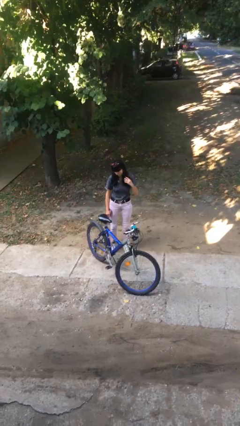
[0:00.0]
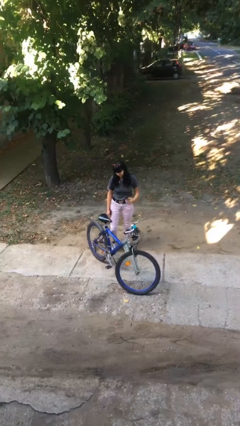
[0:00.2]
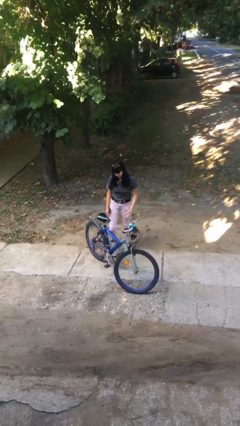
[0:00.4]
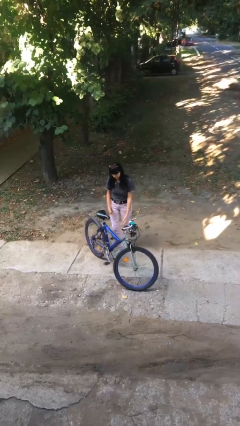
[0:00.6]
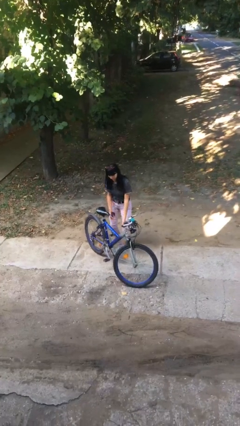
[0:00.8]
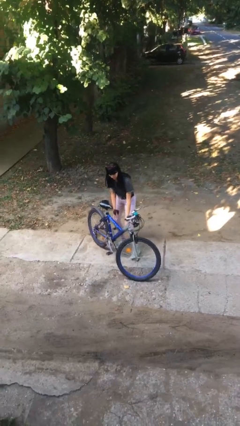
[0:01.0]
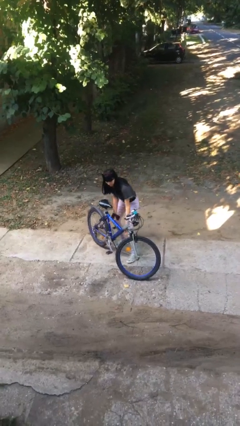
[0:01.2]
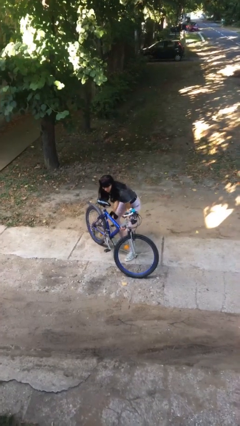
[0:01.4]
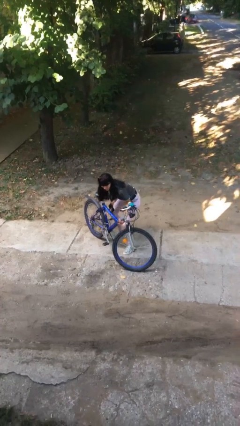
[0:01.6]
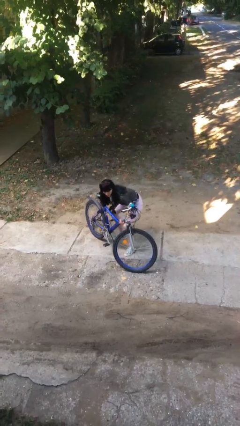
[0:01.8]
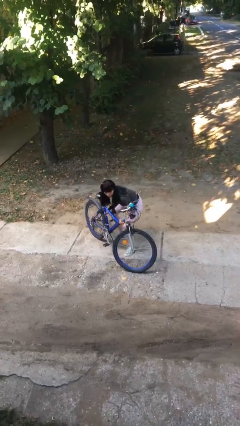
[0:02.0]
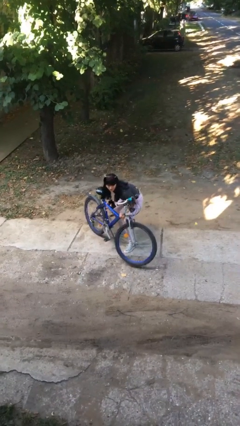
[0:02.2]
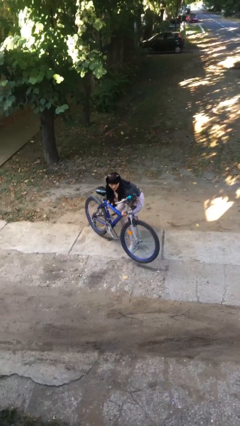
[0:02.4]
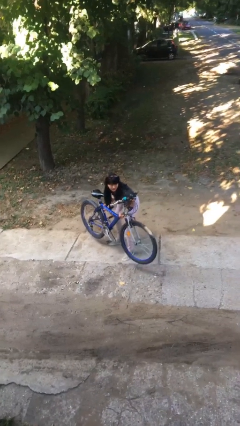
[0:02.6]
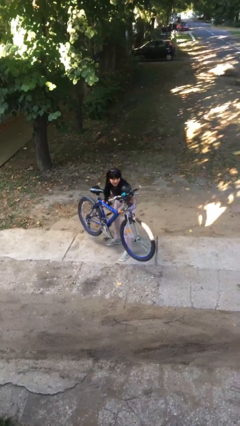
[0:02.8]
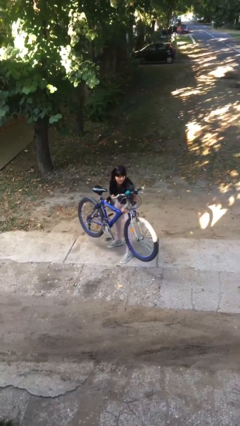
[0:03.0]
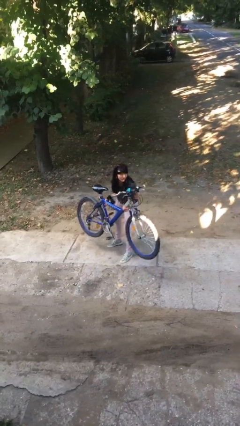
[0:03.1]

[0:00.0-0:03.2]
person picks up object from floor

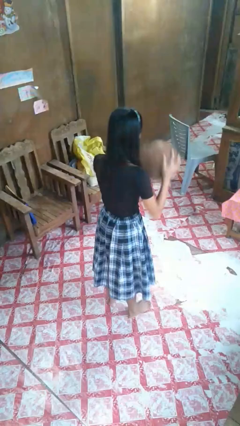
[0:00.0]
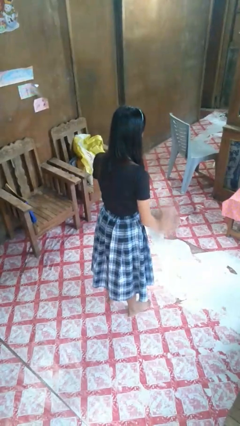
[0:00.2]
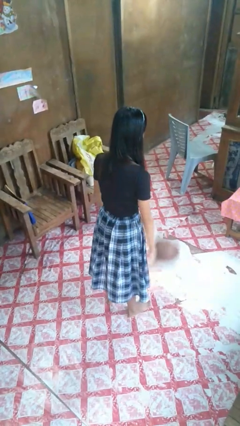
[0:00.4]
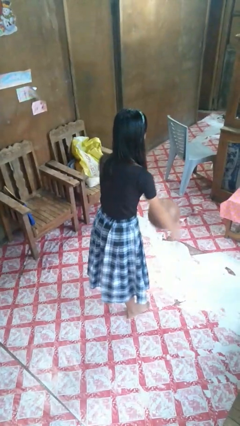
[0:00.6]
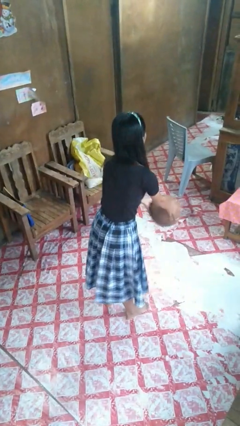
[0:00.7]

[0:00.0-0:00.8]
person bounces ball on floor

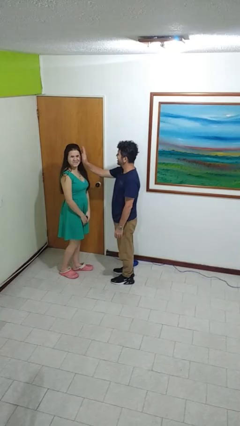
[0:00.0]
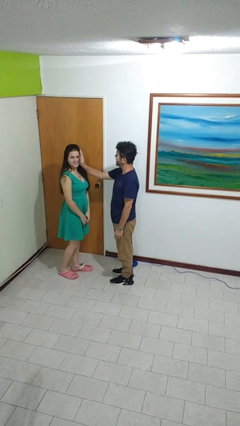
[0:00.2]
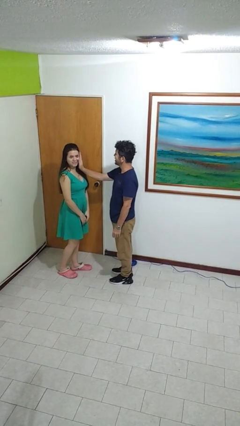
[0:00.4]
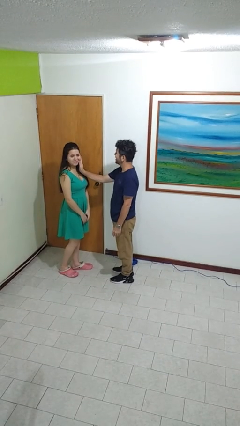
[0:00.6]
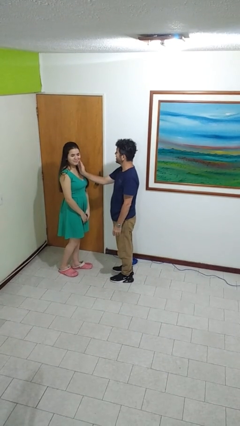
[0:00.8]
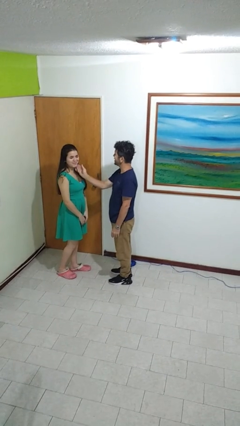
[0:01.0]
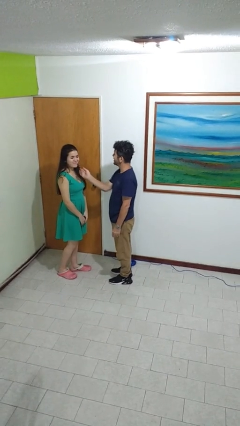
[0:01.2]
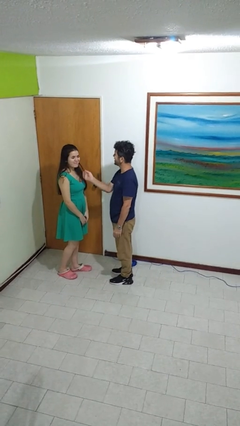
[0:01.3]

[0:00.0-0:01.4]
person touches face of person

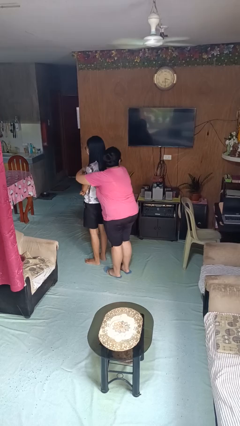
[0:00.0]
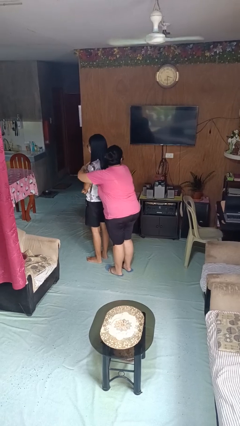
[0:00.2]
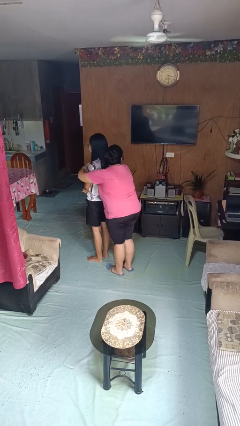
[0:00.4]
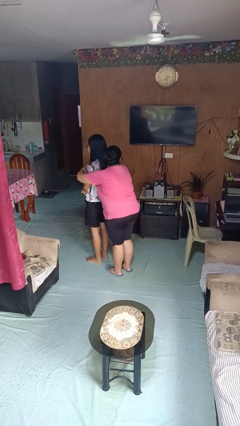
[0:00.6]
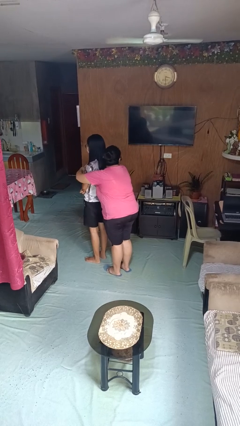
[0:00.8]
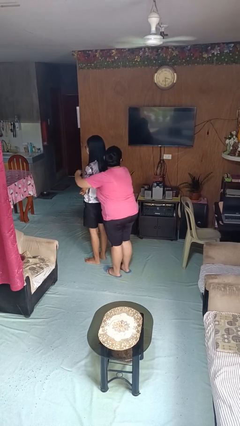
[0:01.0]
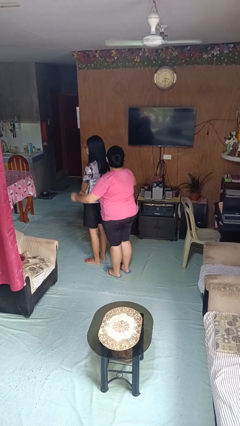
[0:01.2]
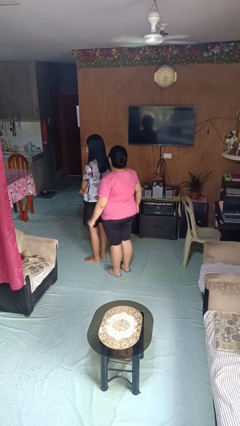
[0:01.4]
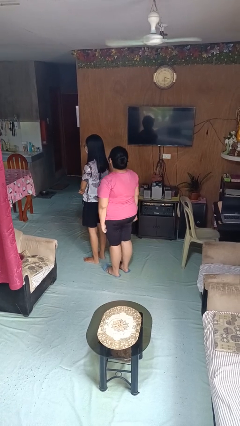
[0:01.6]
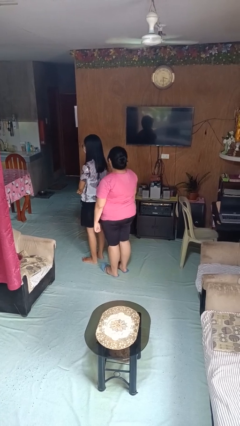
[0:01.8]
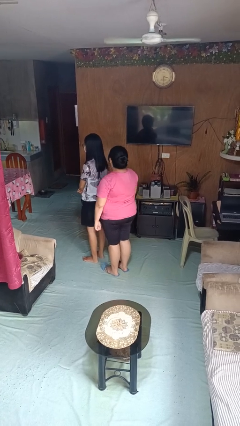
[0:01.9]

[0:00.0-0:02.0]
person hugs person from behind

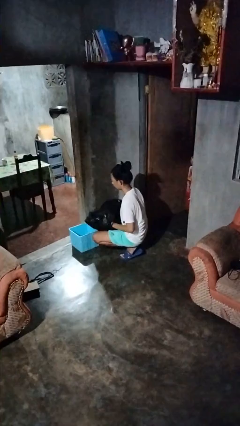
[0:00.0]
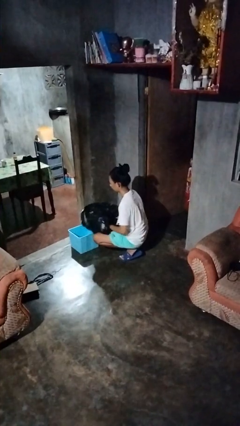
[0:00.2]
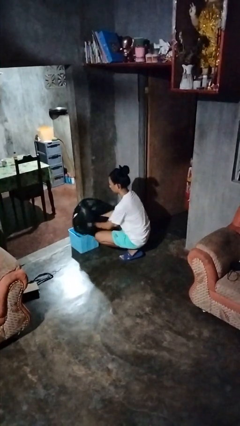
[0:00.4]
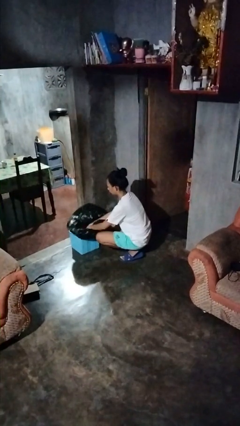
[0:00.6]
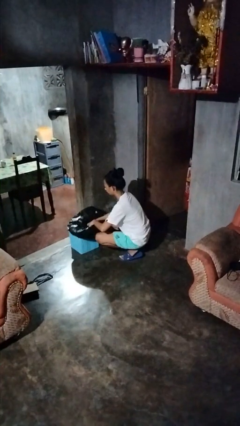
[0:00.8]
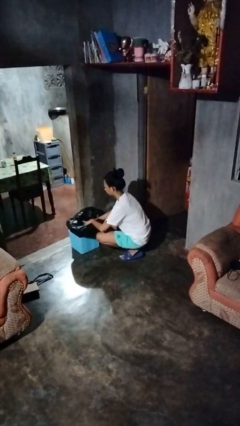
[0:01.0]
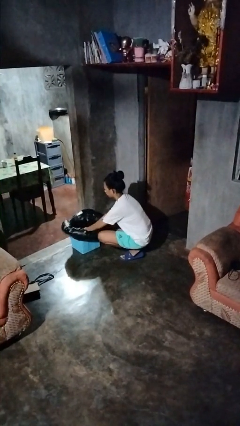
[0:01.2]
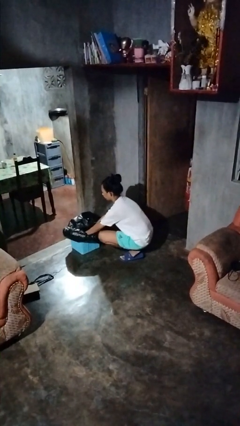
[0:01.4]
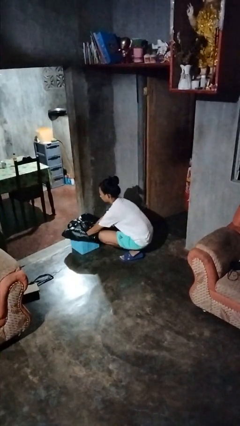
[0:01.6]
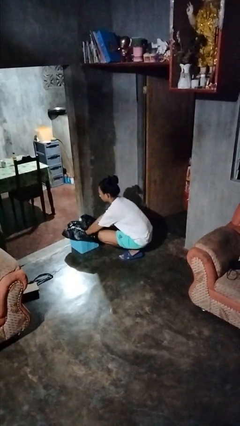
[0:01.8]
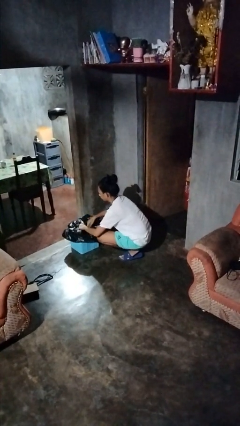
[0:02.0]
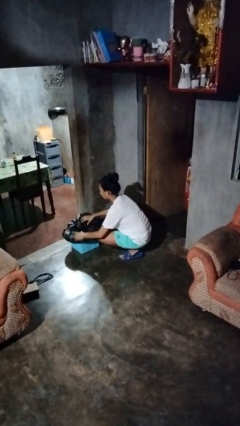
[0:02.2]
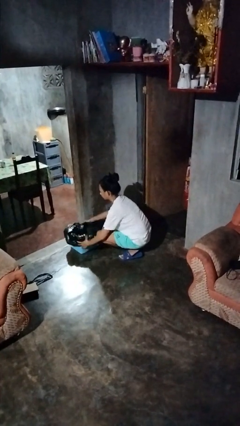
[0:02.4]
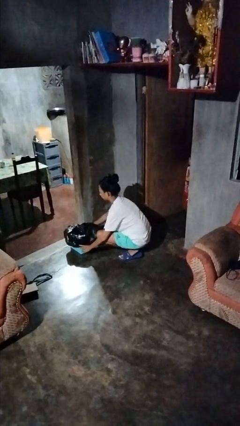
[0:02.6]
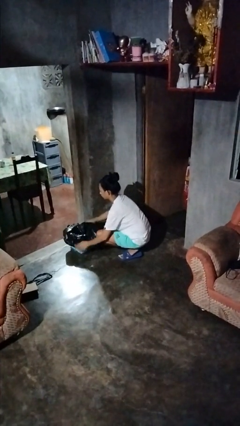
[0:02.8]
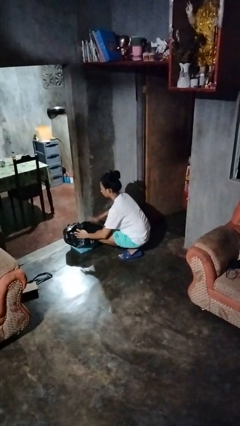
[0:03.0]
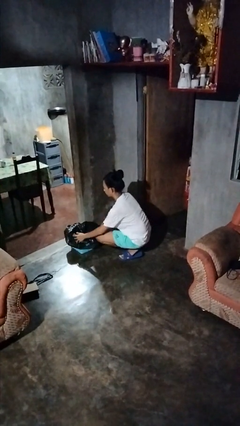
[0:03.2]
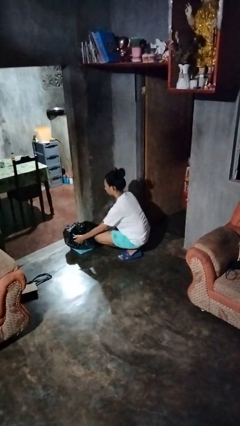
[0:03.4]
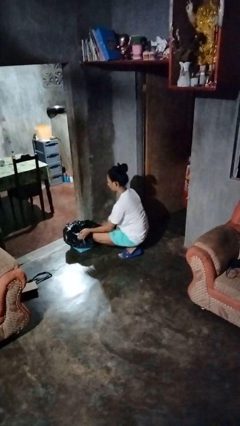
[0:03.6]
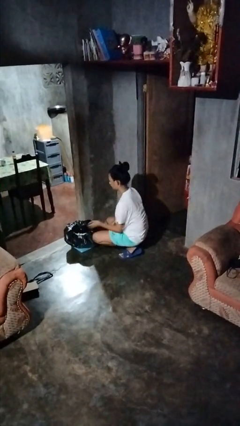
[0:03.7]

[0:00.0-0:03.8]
person inserts trashbag into trashcan

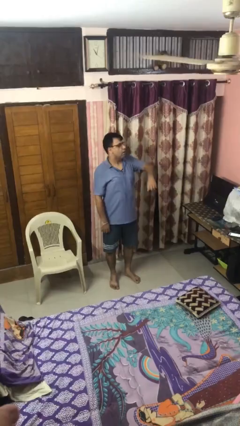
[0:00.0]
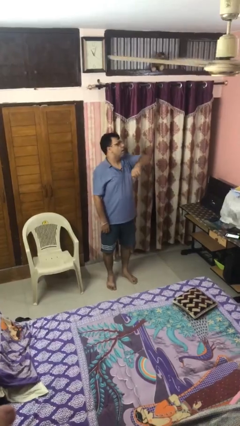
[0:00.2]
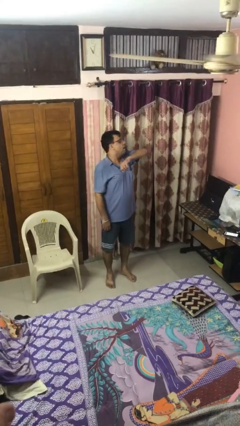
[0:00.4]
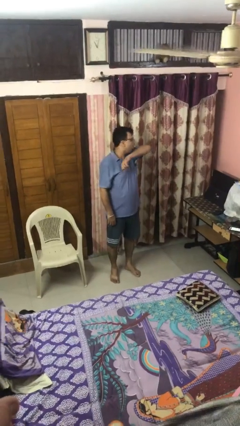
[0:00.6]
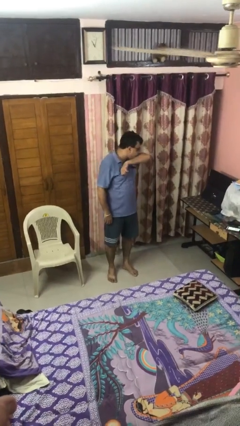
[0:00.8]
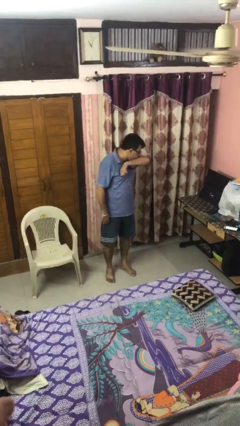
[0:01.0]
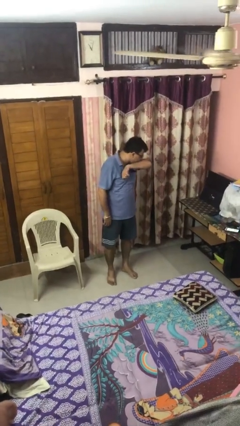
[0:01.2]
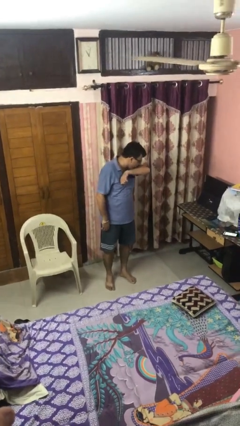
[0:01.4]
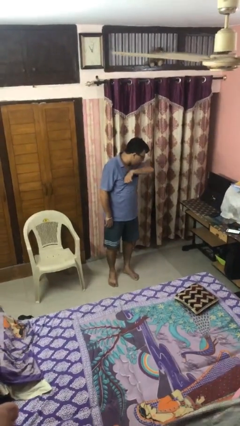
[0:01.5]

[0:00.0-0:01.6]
person sneezes into arm

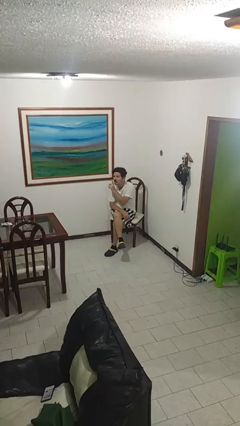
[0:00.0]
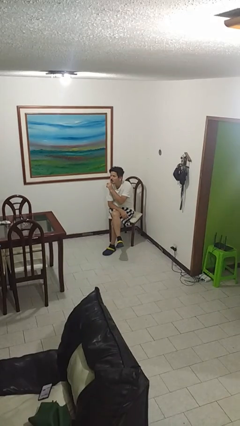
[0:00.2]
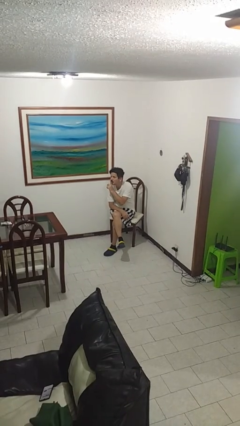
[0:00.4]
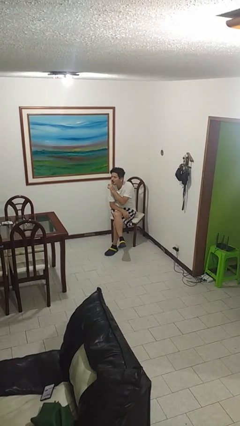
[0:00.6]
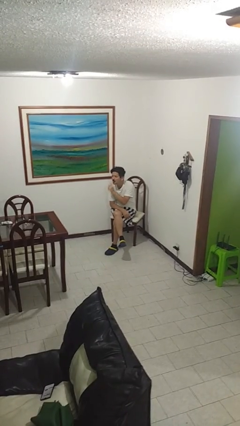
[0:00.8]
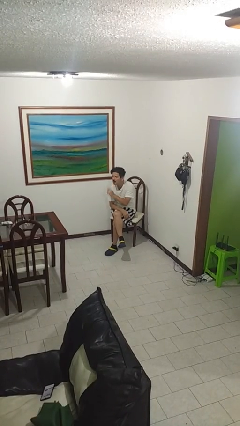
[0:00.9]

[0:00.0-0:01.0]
person gestures be quiet

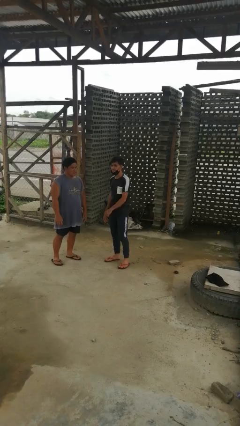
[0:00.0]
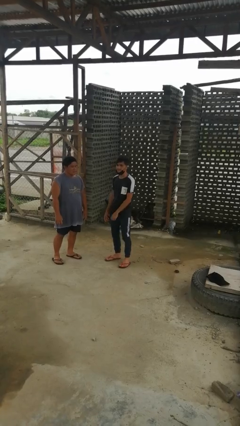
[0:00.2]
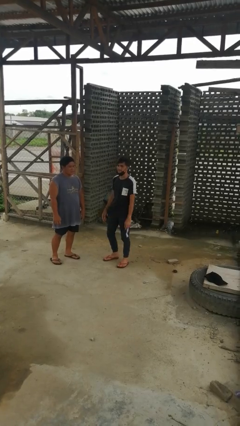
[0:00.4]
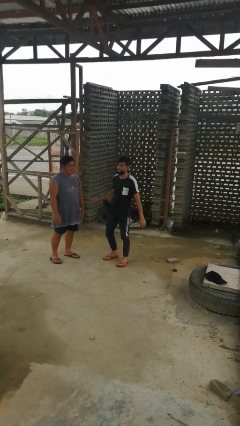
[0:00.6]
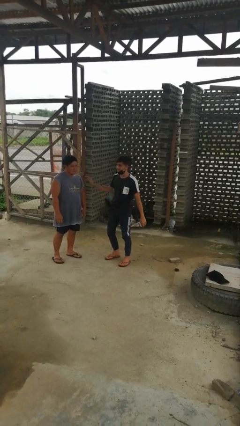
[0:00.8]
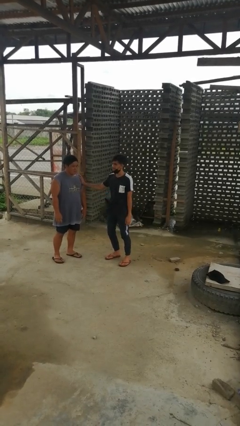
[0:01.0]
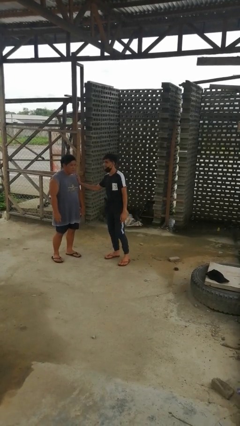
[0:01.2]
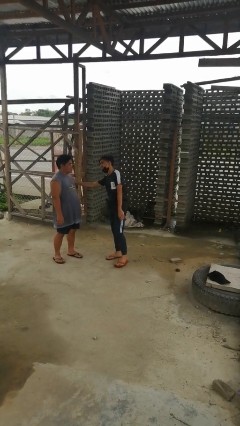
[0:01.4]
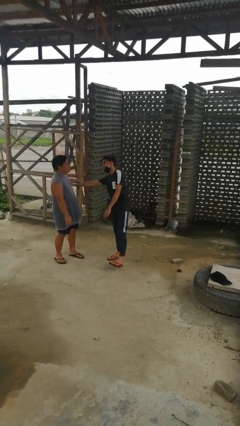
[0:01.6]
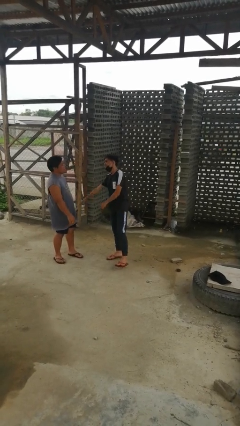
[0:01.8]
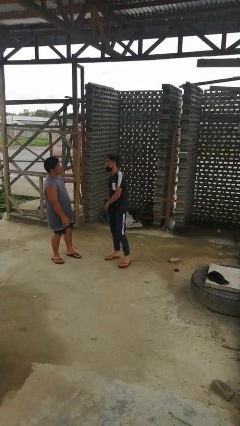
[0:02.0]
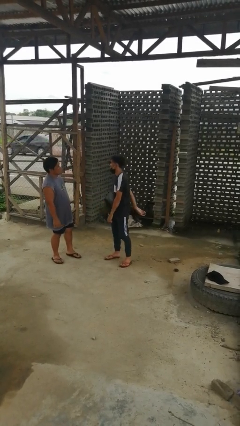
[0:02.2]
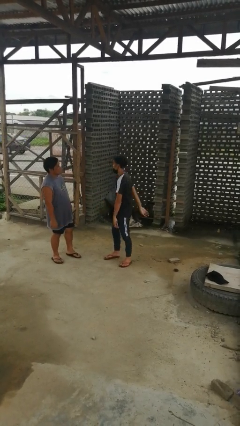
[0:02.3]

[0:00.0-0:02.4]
person shoves person

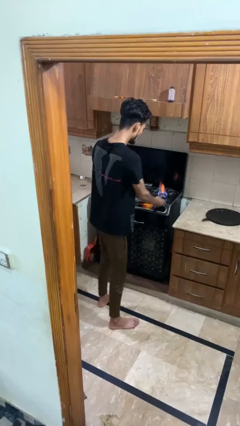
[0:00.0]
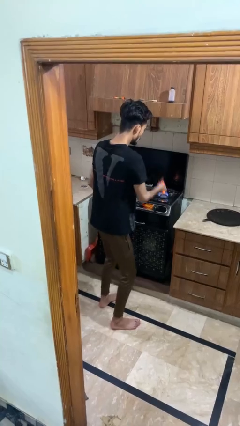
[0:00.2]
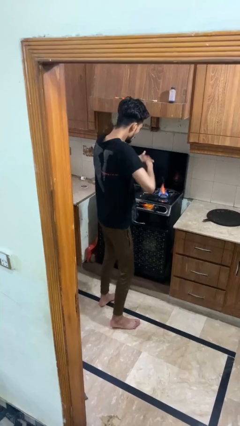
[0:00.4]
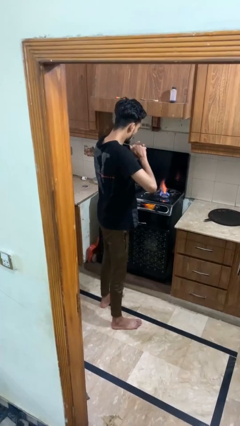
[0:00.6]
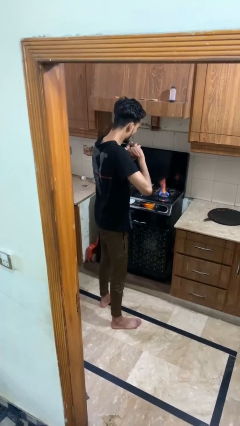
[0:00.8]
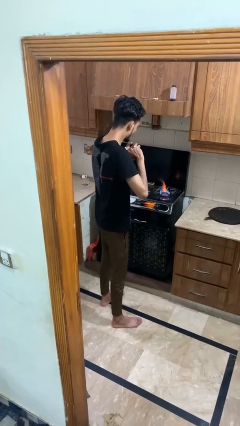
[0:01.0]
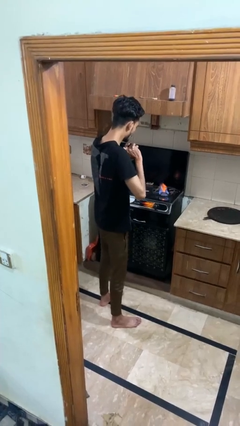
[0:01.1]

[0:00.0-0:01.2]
person burns hand
